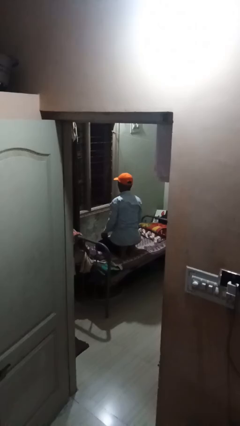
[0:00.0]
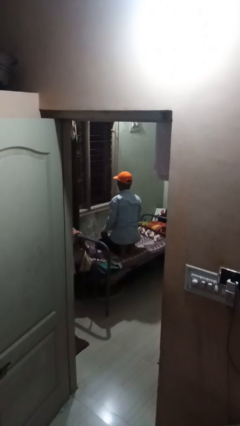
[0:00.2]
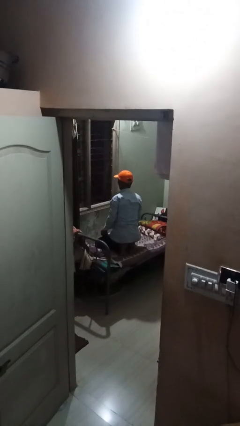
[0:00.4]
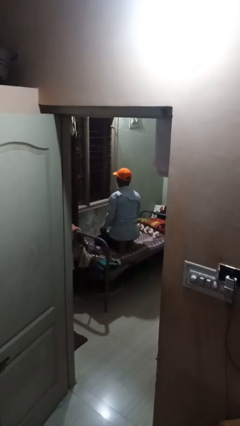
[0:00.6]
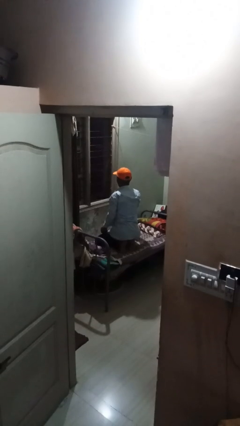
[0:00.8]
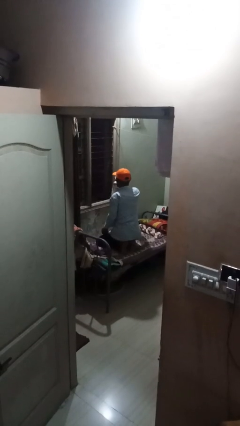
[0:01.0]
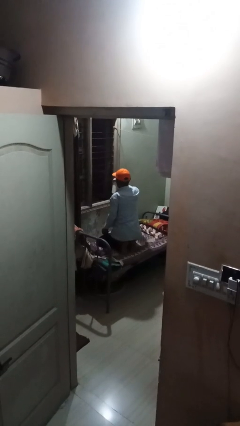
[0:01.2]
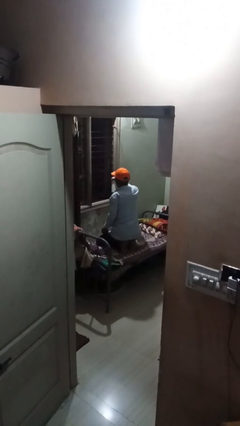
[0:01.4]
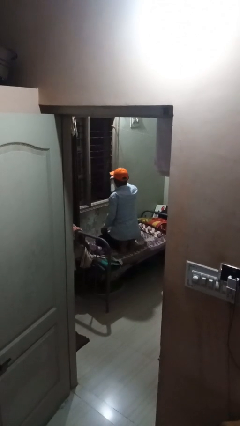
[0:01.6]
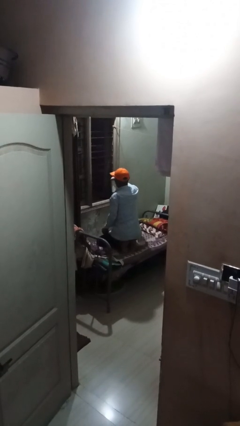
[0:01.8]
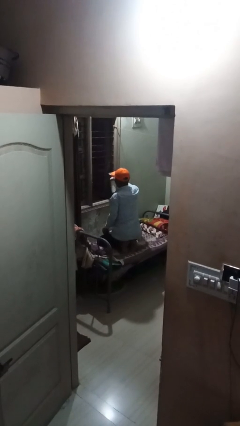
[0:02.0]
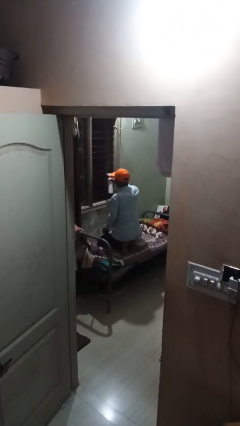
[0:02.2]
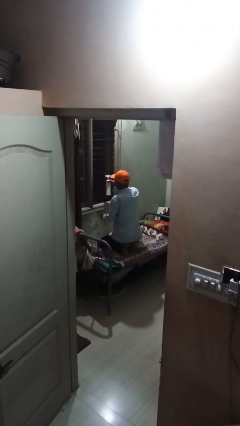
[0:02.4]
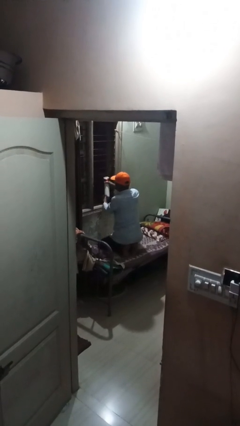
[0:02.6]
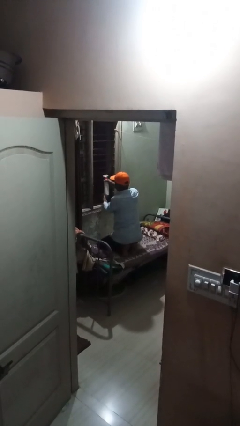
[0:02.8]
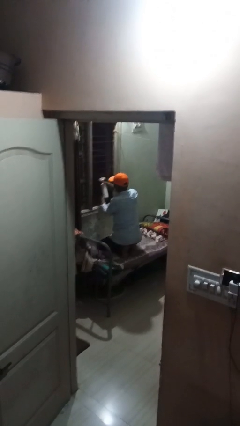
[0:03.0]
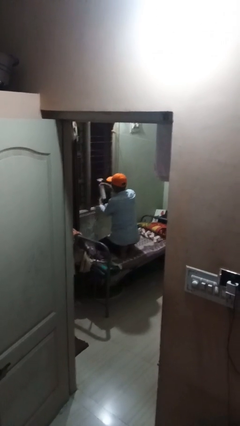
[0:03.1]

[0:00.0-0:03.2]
person sprays from bottle

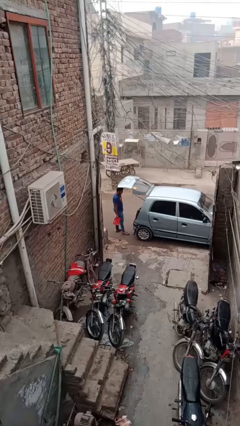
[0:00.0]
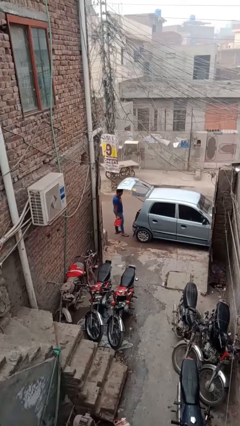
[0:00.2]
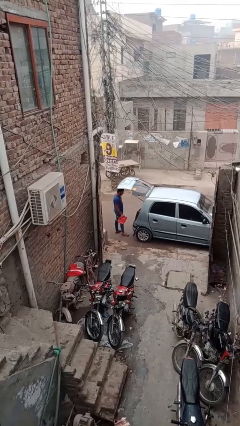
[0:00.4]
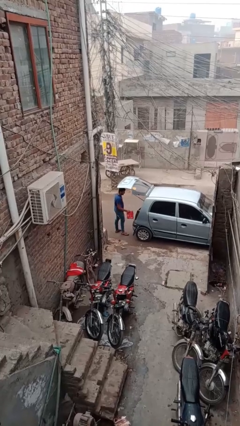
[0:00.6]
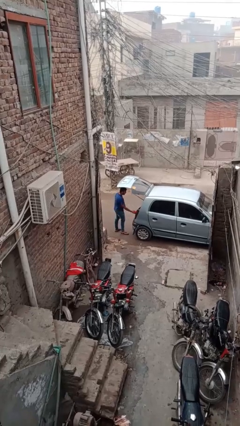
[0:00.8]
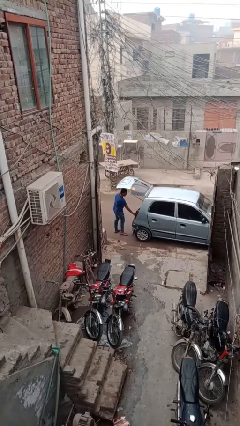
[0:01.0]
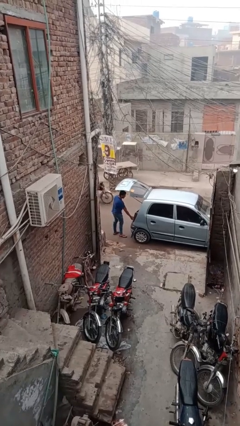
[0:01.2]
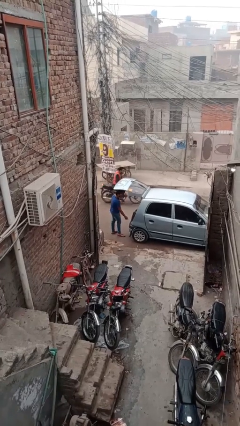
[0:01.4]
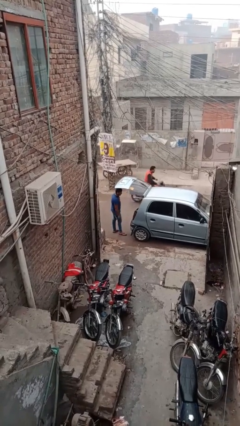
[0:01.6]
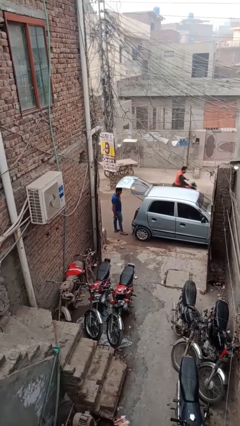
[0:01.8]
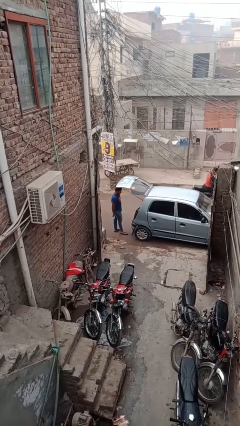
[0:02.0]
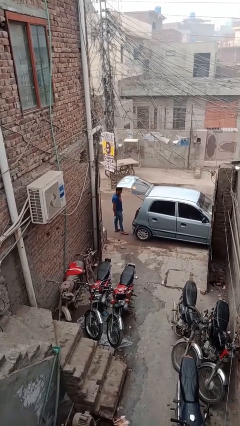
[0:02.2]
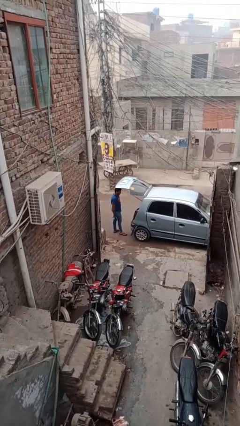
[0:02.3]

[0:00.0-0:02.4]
person loads car

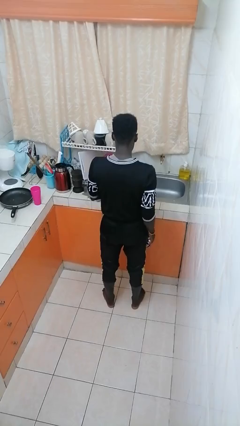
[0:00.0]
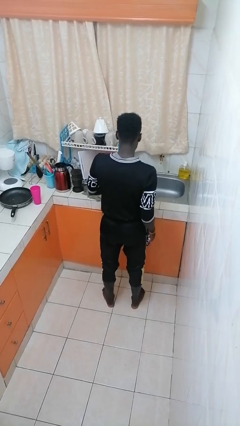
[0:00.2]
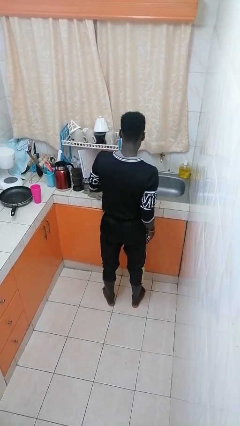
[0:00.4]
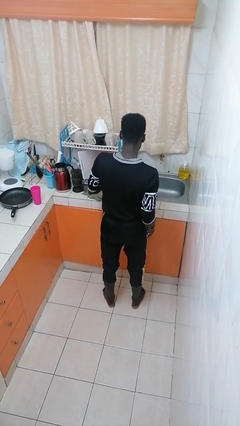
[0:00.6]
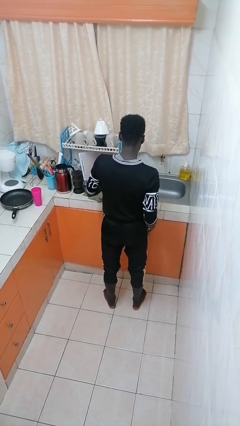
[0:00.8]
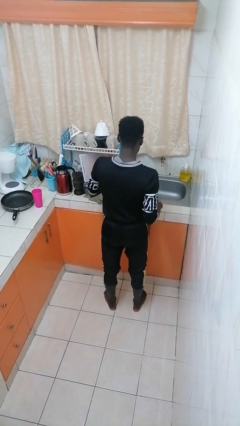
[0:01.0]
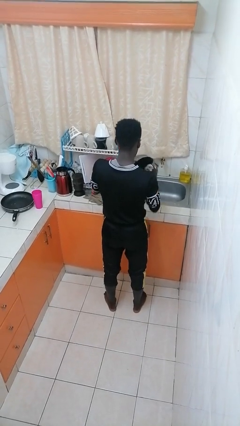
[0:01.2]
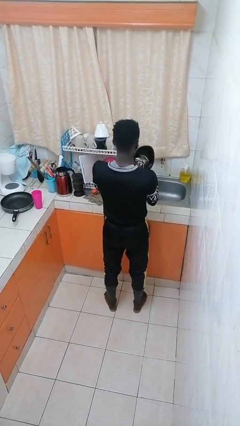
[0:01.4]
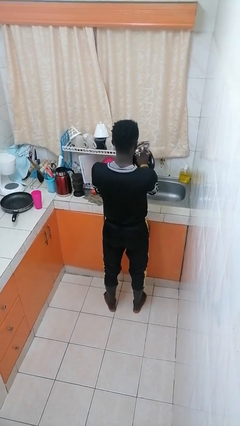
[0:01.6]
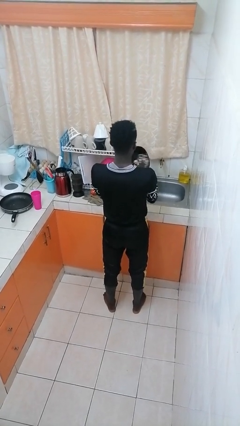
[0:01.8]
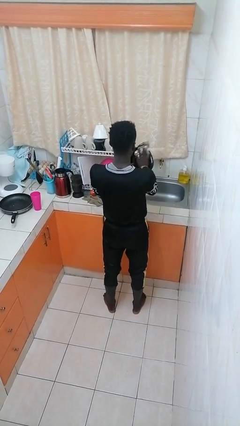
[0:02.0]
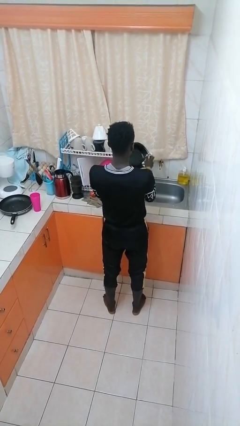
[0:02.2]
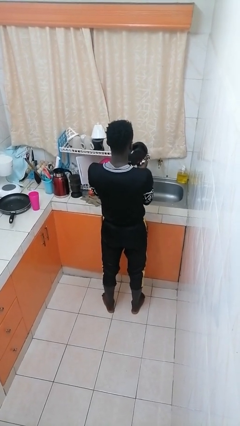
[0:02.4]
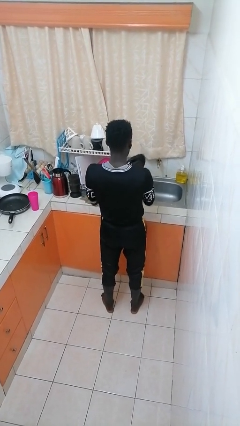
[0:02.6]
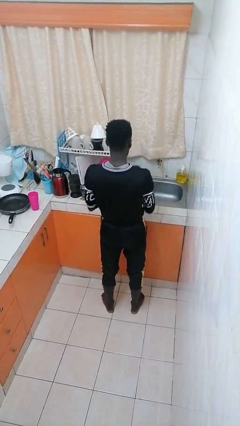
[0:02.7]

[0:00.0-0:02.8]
person dries dish

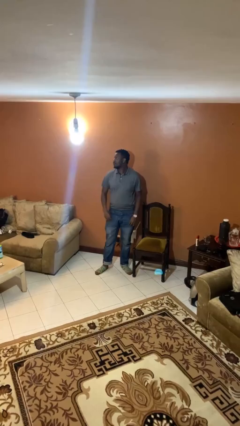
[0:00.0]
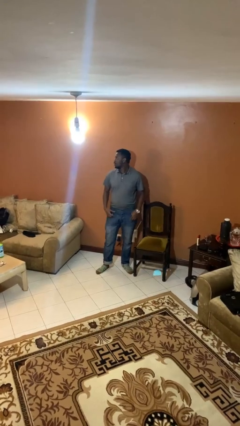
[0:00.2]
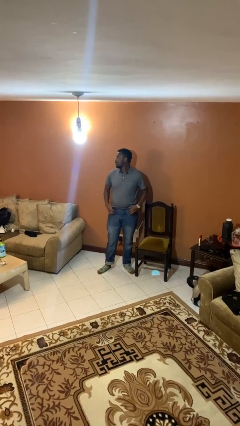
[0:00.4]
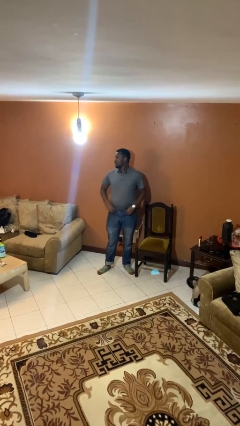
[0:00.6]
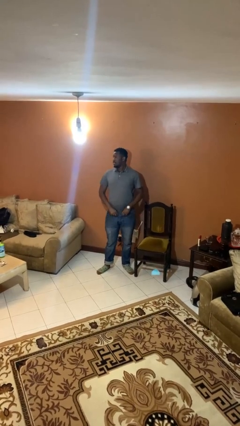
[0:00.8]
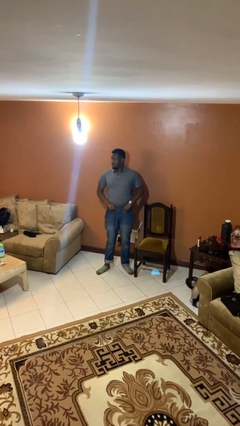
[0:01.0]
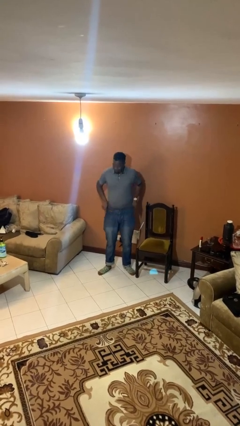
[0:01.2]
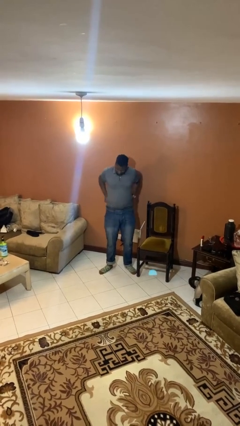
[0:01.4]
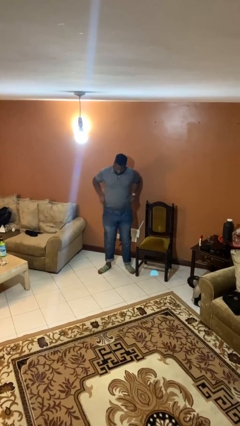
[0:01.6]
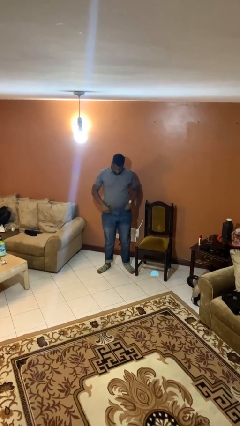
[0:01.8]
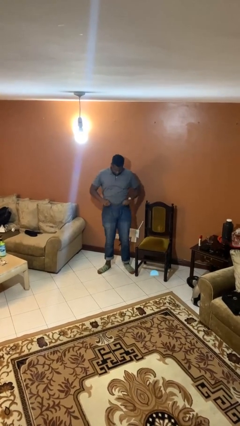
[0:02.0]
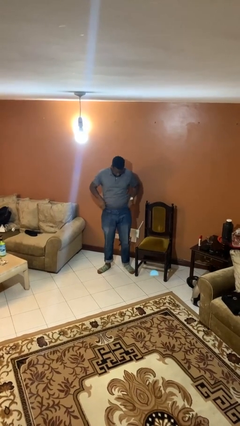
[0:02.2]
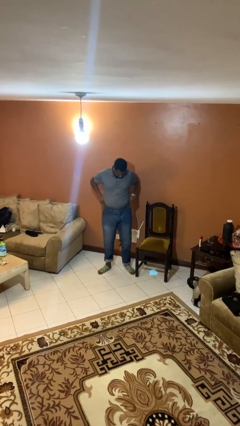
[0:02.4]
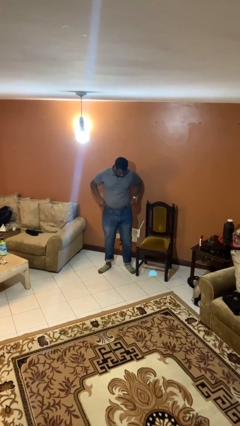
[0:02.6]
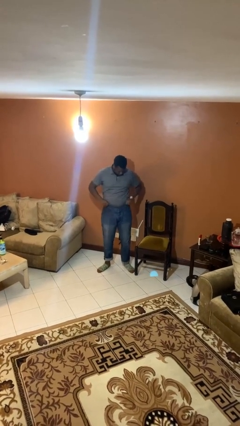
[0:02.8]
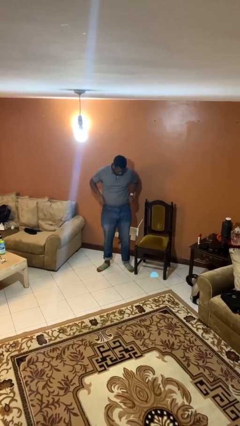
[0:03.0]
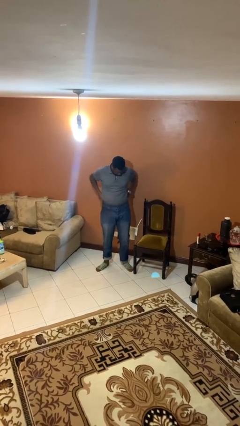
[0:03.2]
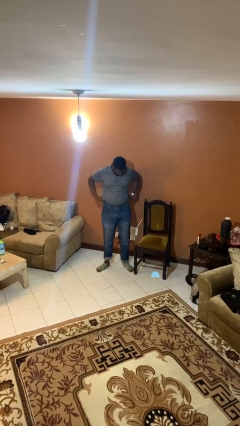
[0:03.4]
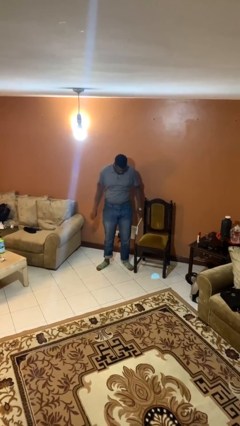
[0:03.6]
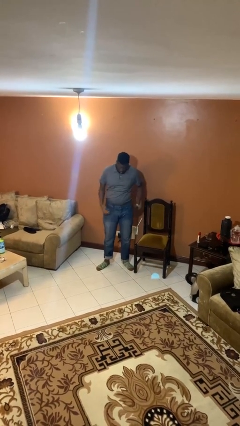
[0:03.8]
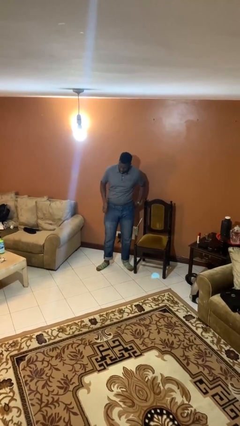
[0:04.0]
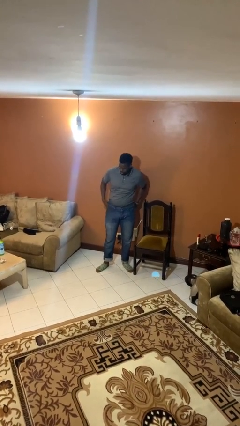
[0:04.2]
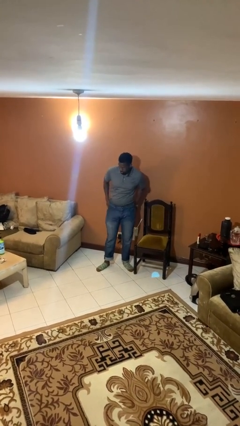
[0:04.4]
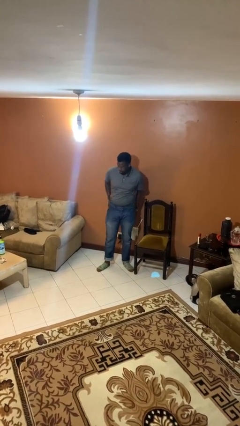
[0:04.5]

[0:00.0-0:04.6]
person hikes up pants

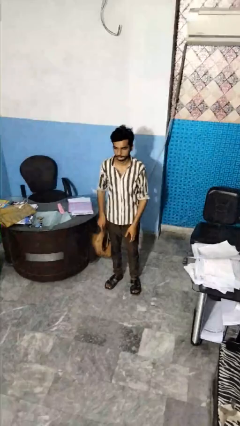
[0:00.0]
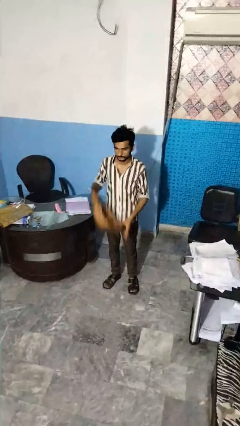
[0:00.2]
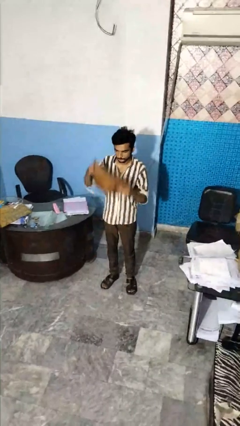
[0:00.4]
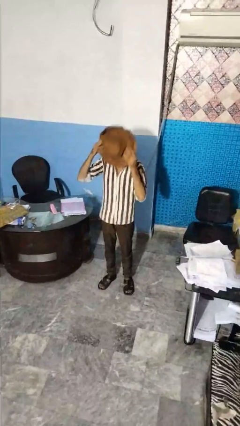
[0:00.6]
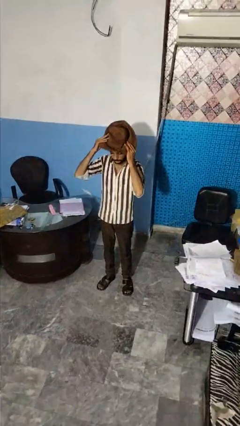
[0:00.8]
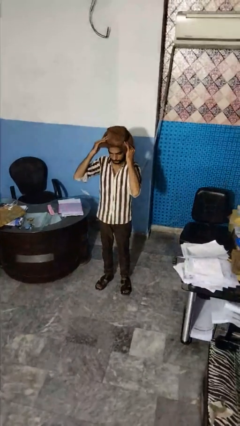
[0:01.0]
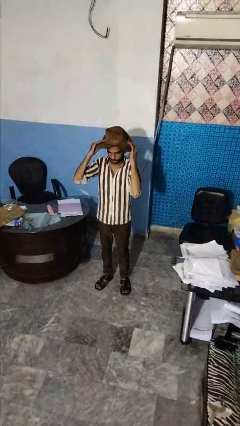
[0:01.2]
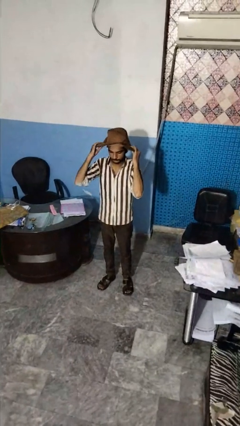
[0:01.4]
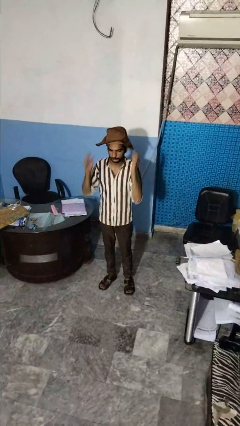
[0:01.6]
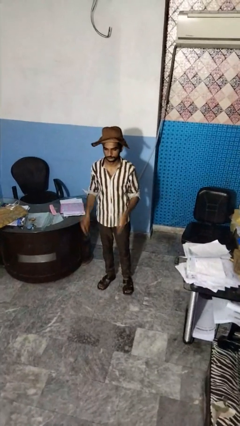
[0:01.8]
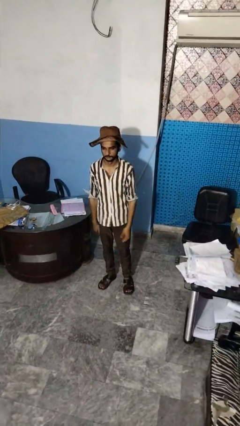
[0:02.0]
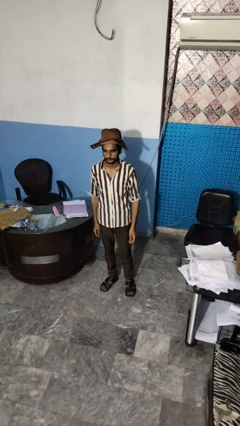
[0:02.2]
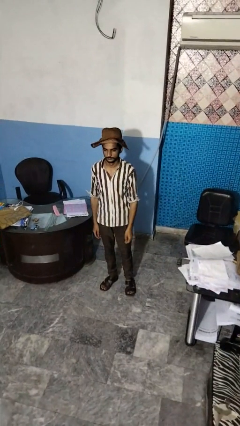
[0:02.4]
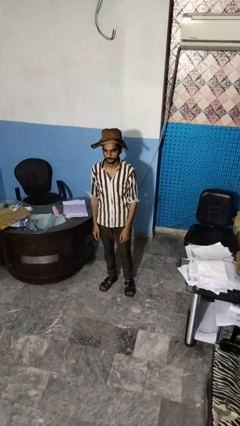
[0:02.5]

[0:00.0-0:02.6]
person puts on hat

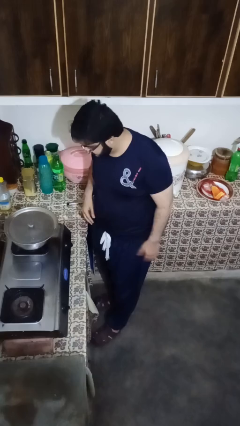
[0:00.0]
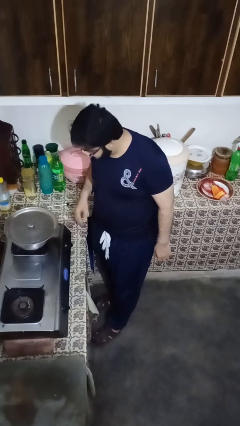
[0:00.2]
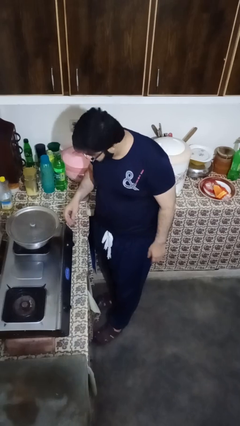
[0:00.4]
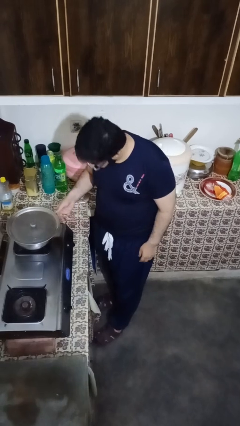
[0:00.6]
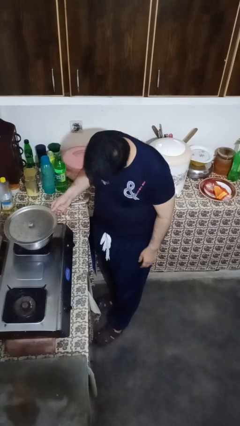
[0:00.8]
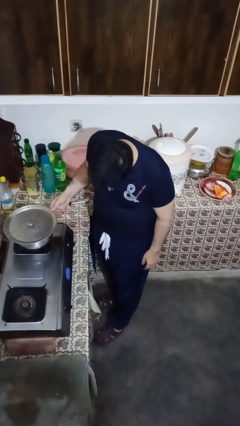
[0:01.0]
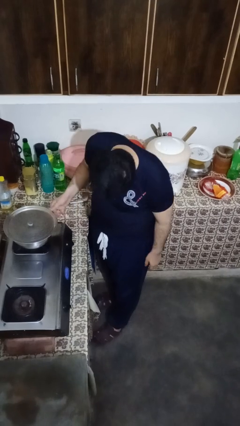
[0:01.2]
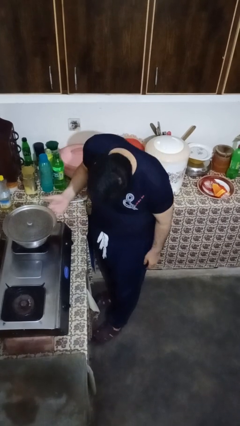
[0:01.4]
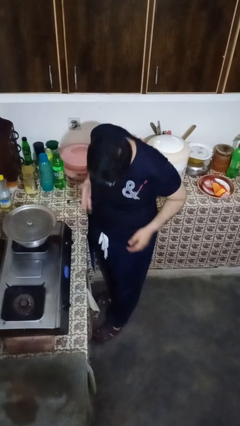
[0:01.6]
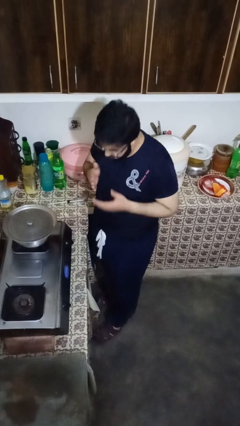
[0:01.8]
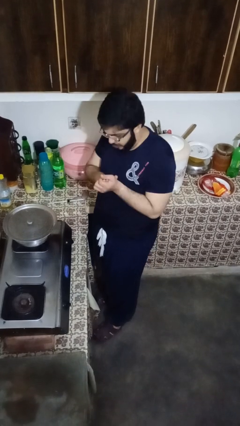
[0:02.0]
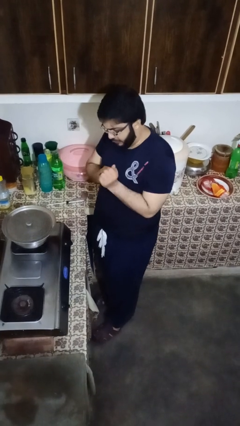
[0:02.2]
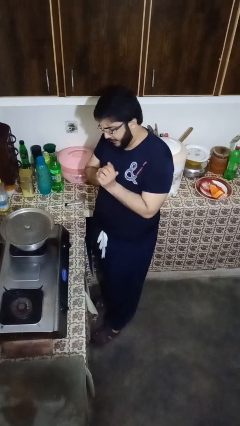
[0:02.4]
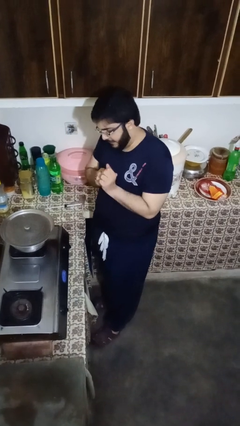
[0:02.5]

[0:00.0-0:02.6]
person burns hand
